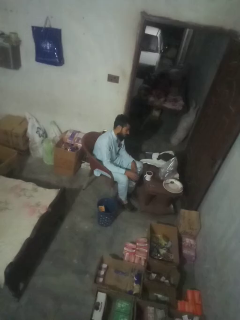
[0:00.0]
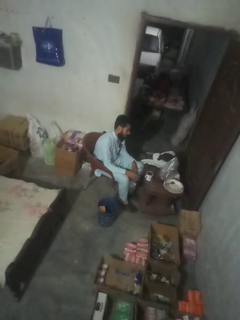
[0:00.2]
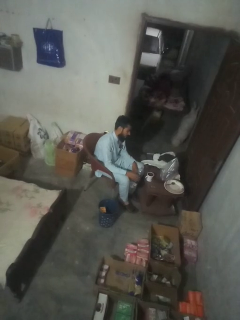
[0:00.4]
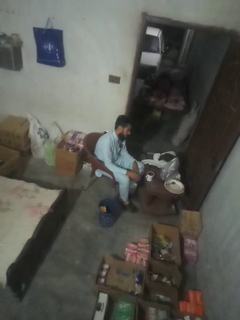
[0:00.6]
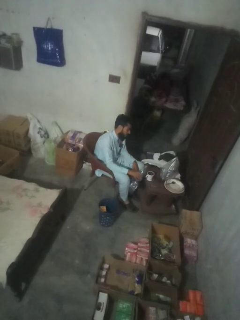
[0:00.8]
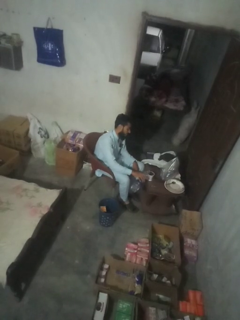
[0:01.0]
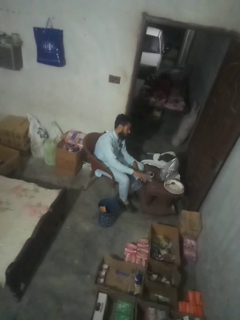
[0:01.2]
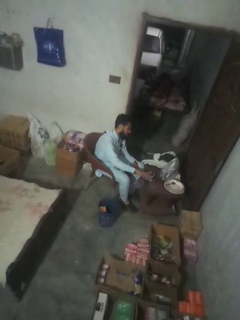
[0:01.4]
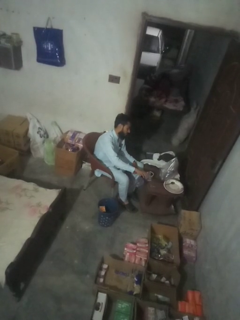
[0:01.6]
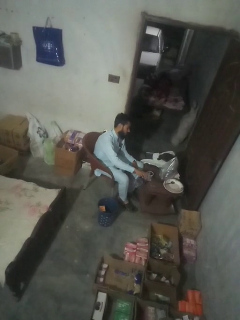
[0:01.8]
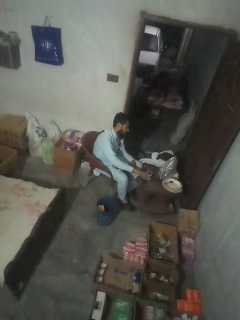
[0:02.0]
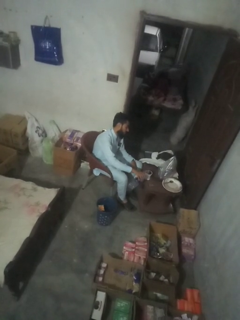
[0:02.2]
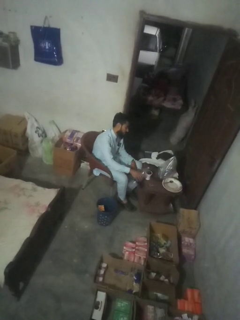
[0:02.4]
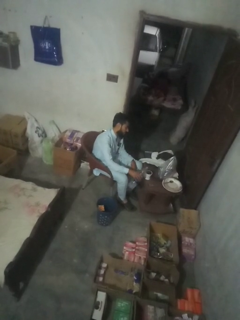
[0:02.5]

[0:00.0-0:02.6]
person pours liquid into cup

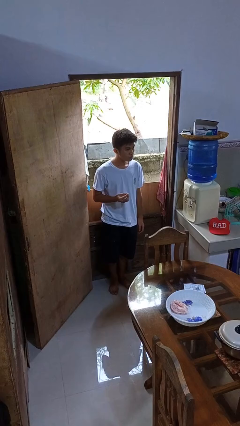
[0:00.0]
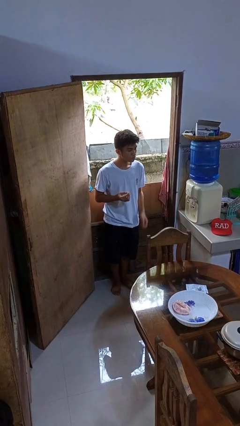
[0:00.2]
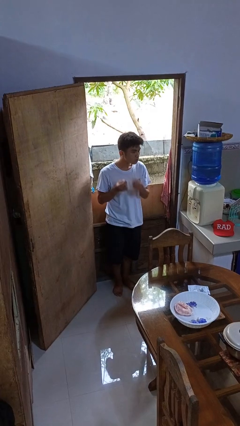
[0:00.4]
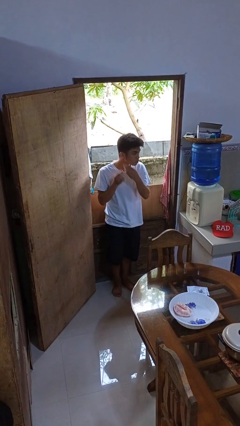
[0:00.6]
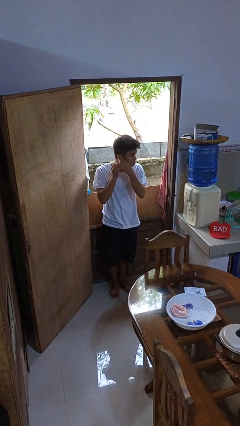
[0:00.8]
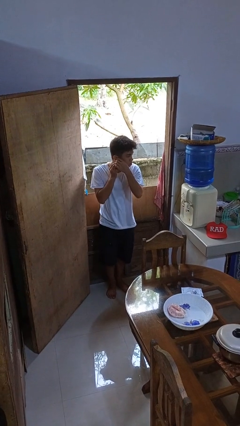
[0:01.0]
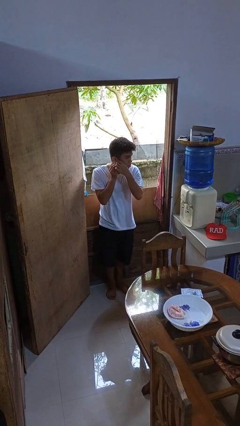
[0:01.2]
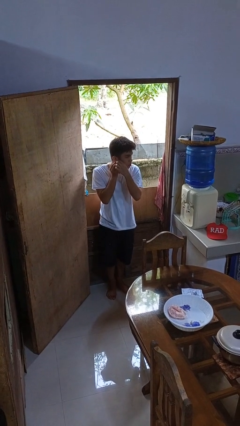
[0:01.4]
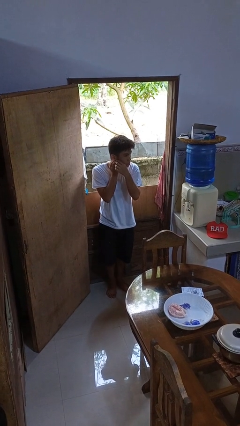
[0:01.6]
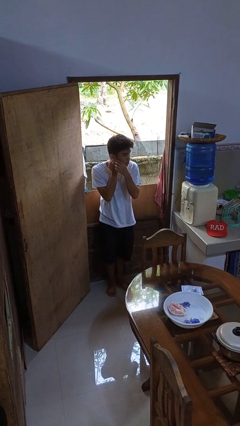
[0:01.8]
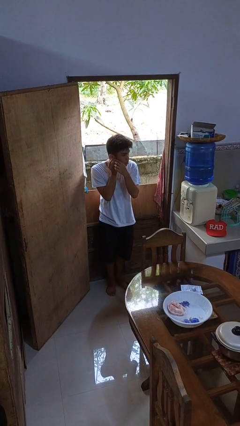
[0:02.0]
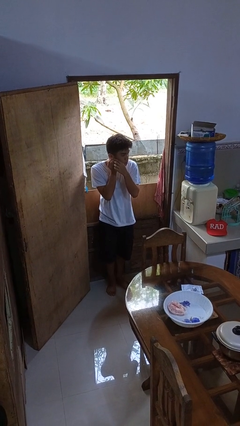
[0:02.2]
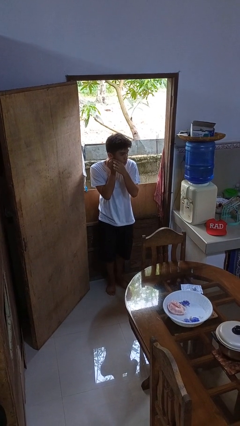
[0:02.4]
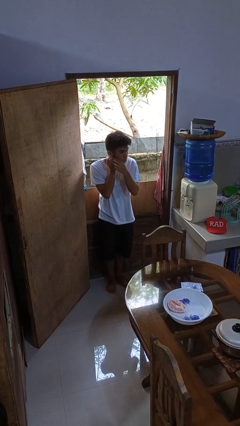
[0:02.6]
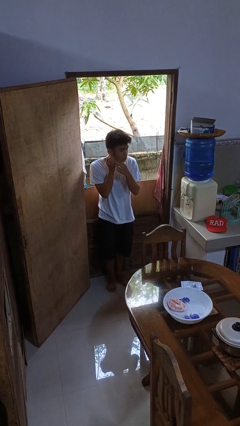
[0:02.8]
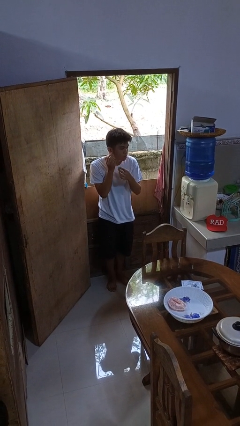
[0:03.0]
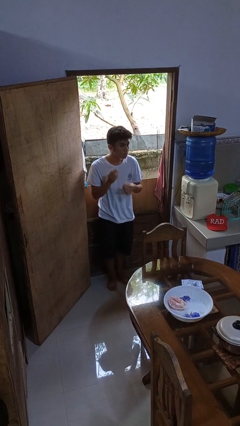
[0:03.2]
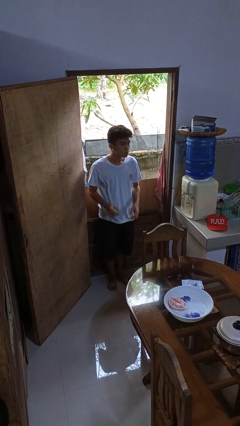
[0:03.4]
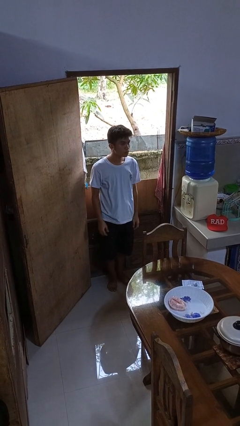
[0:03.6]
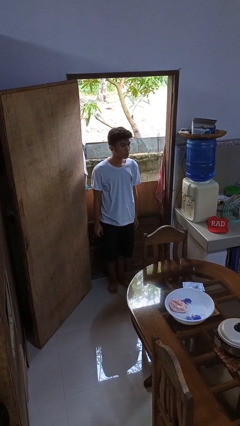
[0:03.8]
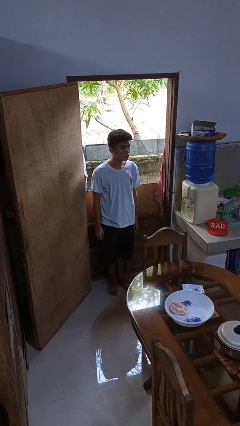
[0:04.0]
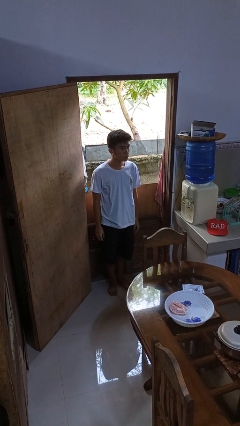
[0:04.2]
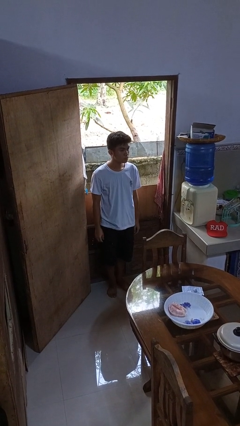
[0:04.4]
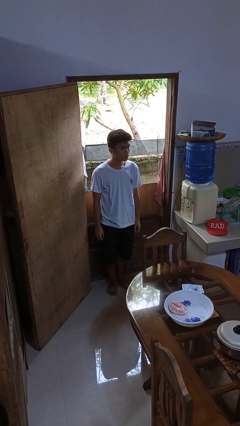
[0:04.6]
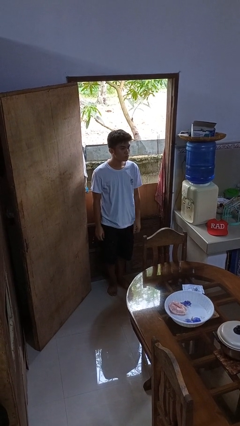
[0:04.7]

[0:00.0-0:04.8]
person puts on earrings

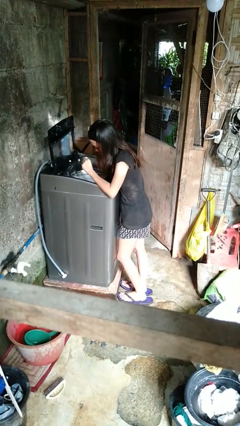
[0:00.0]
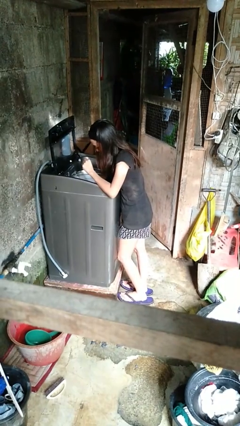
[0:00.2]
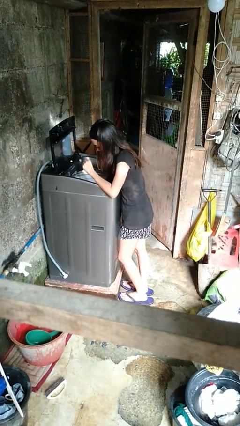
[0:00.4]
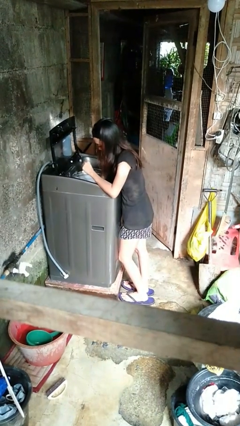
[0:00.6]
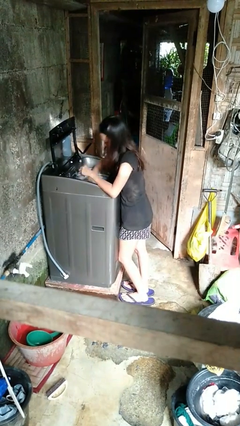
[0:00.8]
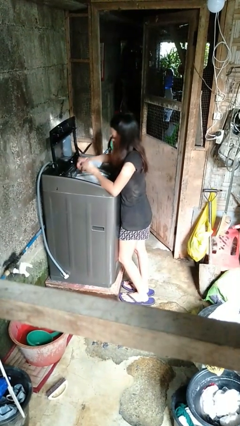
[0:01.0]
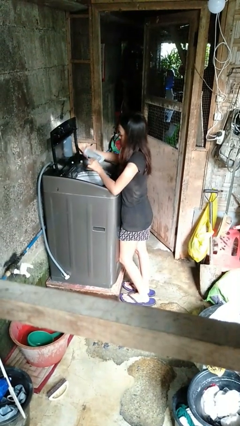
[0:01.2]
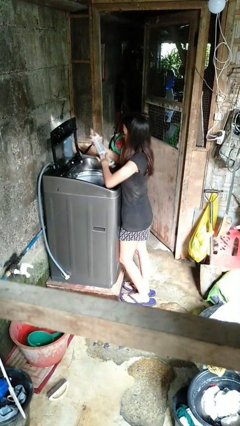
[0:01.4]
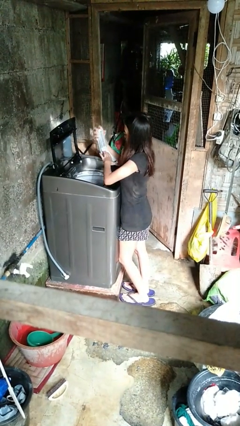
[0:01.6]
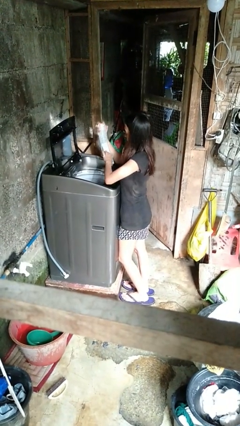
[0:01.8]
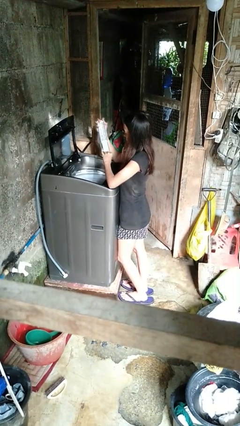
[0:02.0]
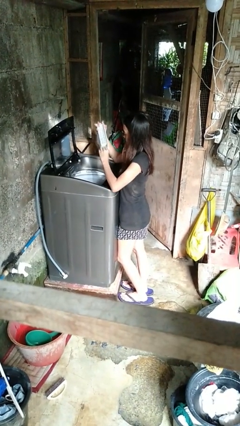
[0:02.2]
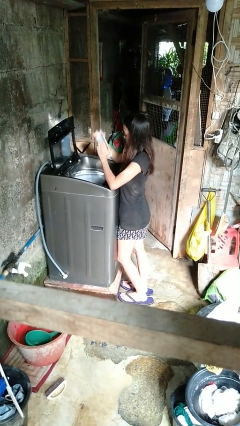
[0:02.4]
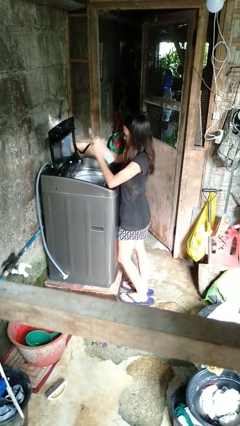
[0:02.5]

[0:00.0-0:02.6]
person cleans dryer lint trap

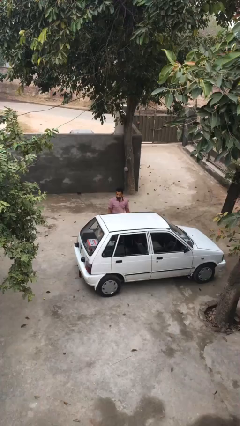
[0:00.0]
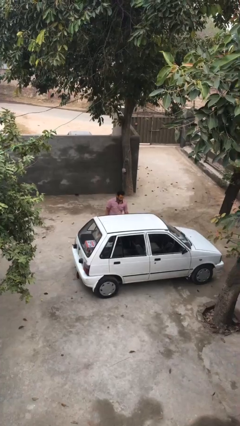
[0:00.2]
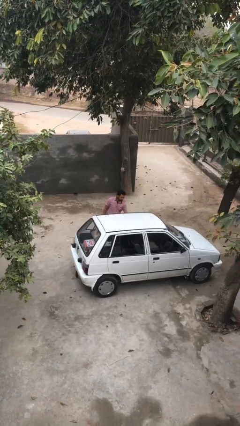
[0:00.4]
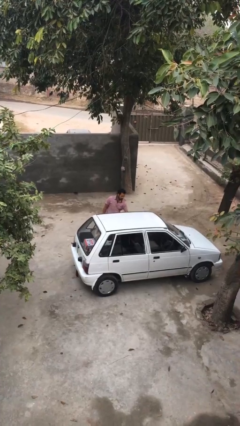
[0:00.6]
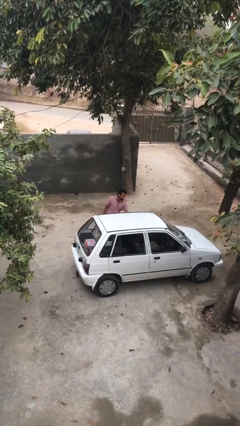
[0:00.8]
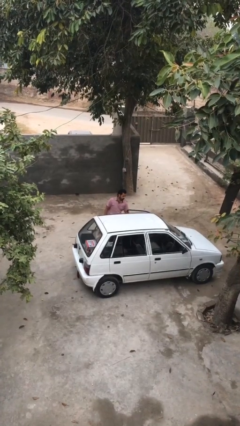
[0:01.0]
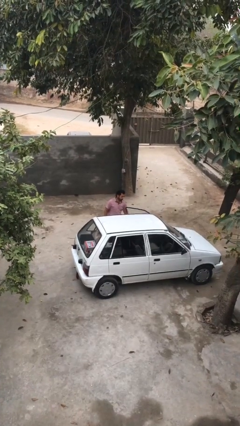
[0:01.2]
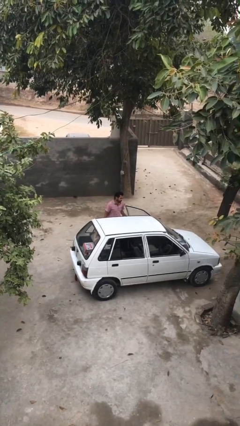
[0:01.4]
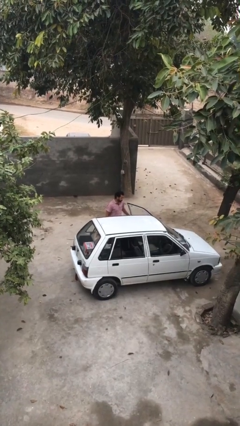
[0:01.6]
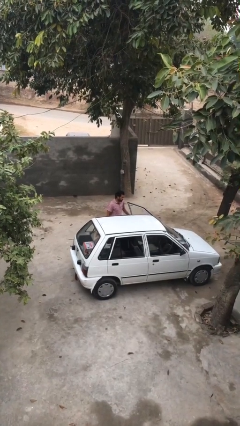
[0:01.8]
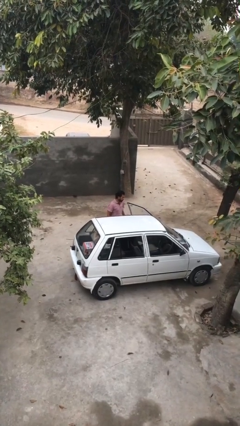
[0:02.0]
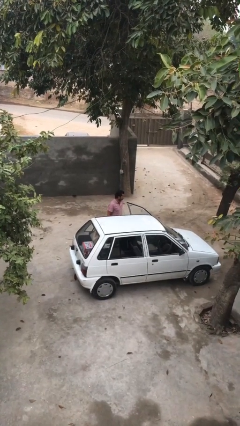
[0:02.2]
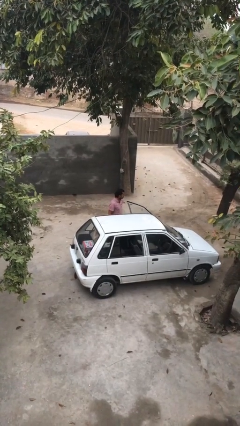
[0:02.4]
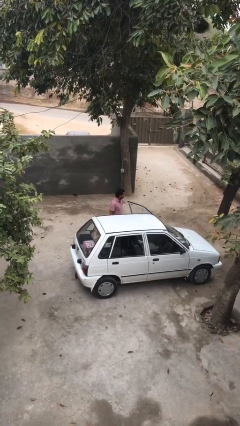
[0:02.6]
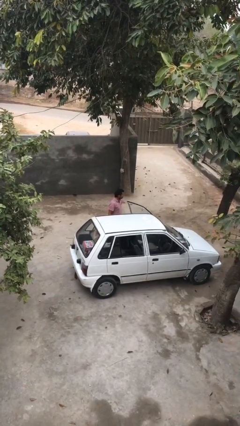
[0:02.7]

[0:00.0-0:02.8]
person opens car door

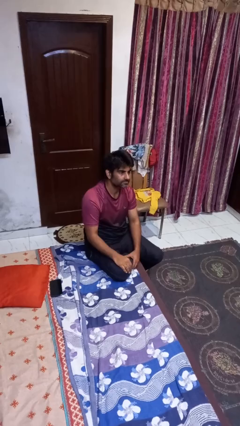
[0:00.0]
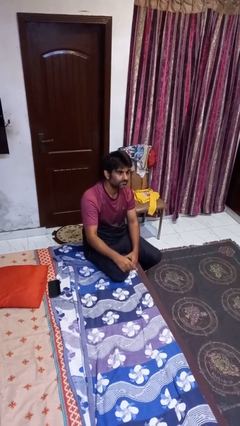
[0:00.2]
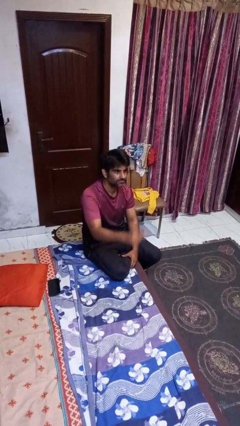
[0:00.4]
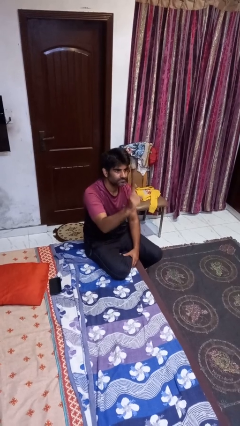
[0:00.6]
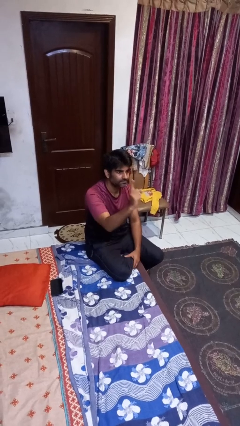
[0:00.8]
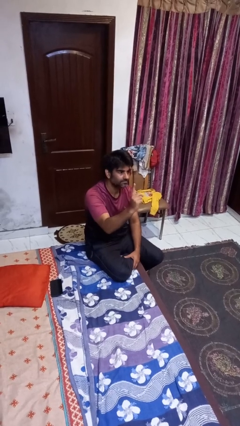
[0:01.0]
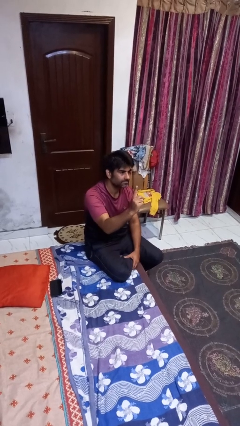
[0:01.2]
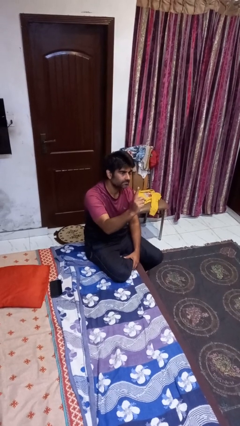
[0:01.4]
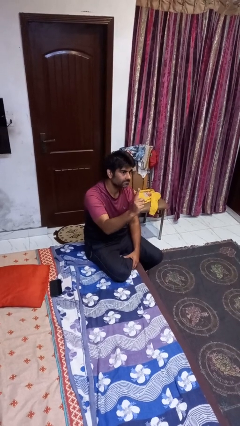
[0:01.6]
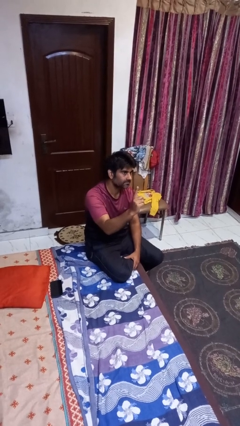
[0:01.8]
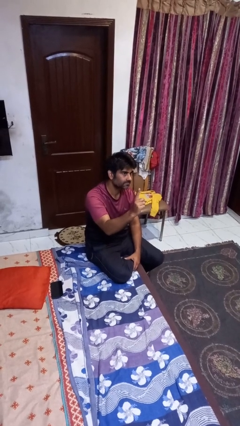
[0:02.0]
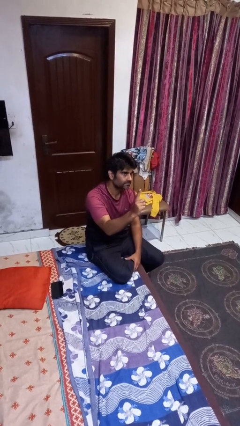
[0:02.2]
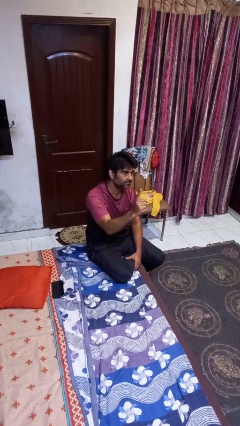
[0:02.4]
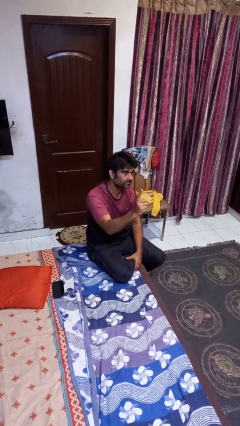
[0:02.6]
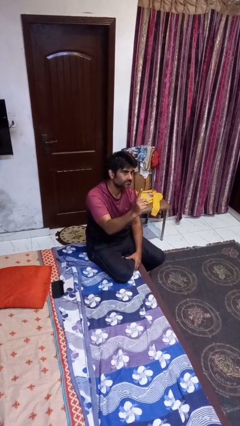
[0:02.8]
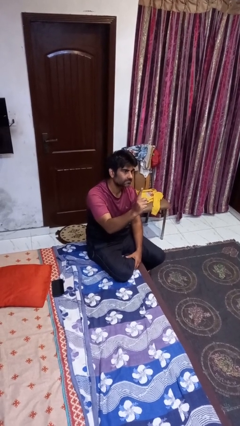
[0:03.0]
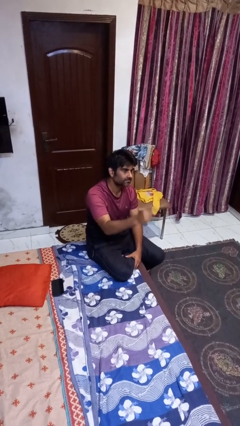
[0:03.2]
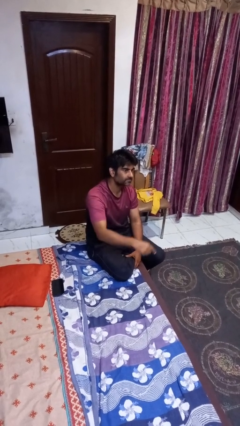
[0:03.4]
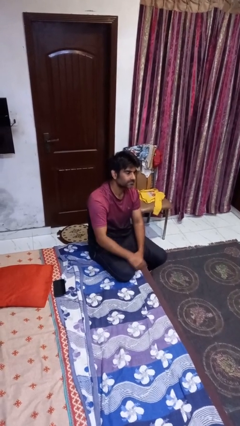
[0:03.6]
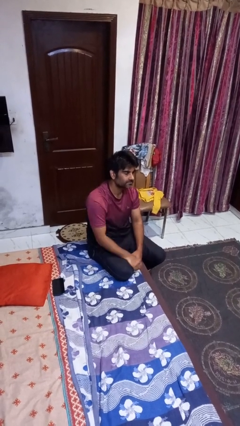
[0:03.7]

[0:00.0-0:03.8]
person gestures number one

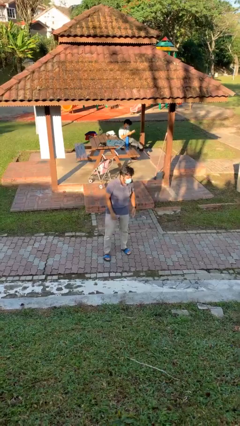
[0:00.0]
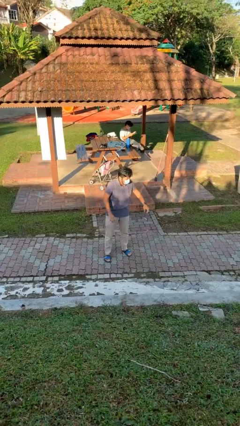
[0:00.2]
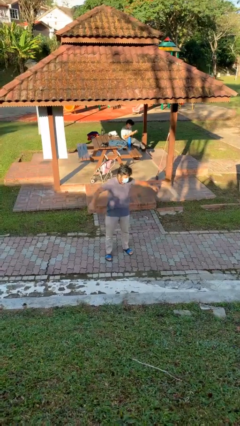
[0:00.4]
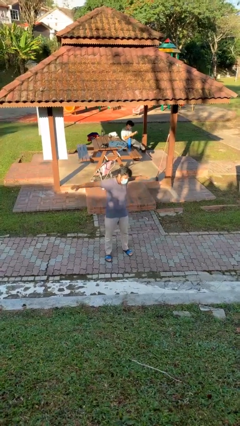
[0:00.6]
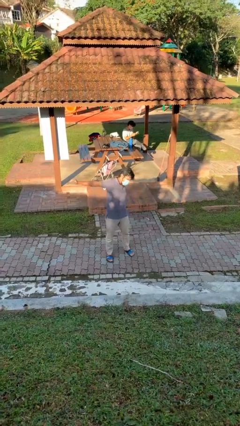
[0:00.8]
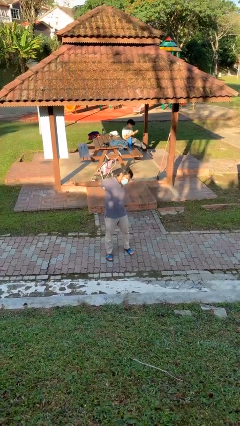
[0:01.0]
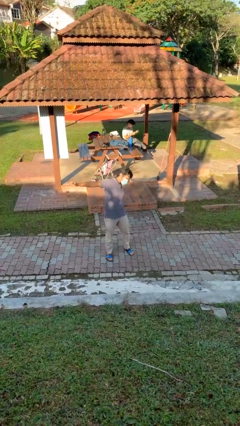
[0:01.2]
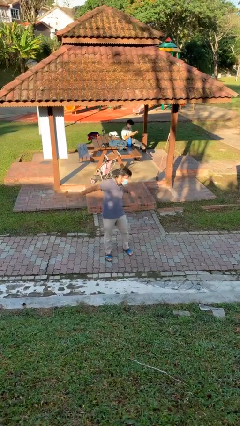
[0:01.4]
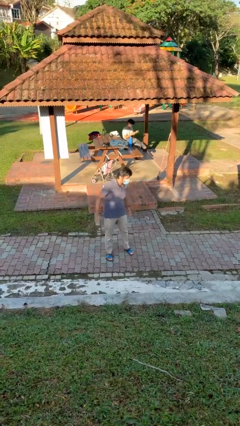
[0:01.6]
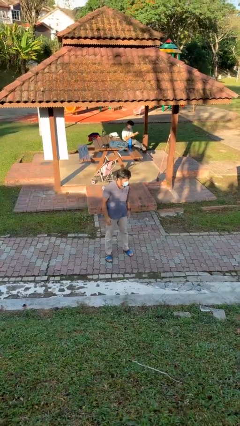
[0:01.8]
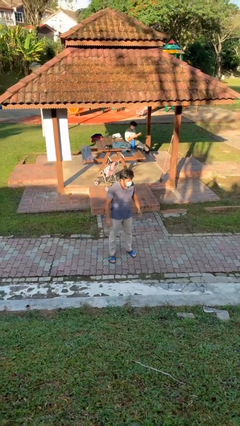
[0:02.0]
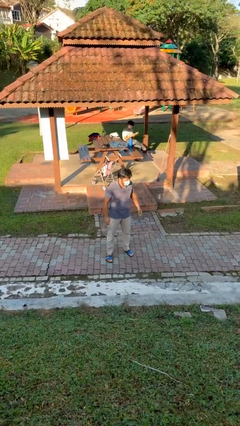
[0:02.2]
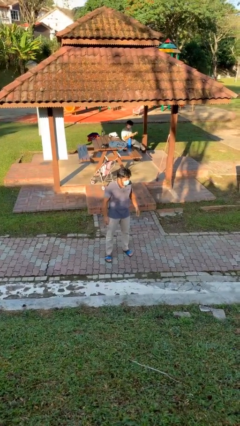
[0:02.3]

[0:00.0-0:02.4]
person stretches arms to side
